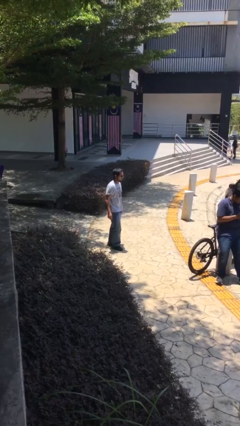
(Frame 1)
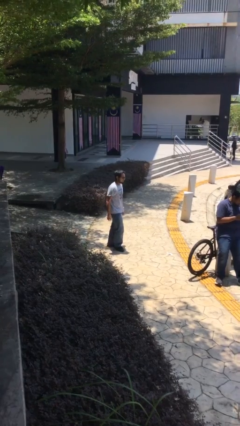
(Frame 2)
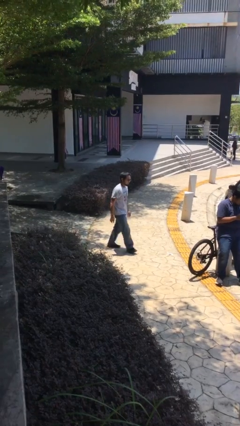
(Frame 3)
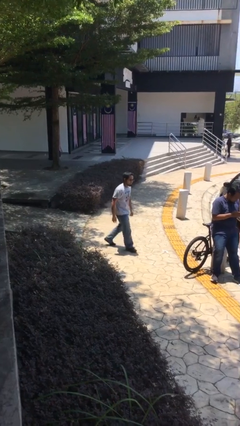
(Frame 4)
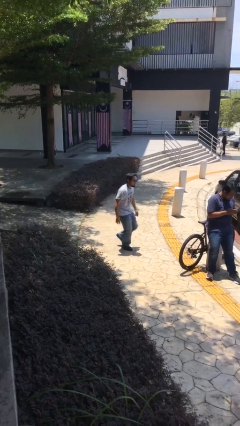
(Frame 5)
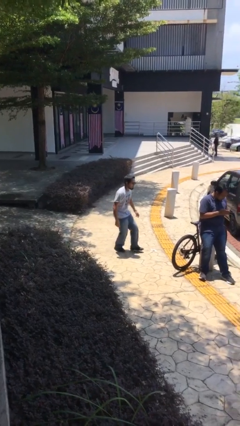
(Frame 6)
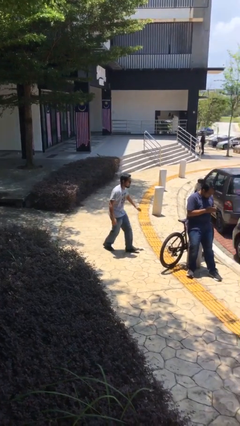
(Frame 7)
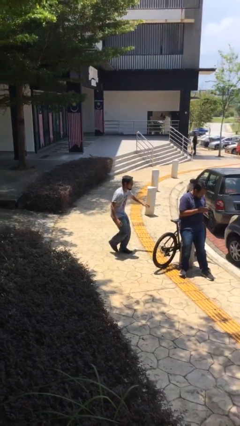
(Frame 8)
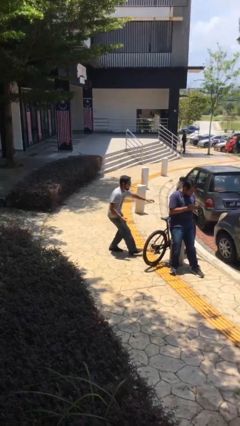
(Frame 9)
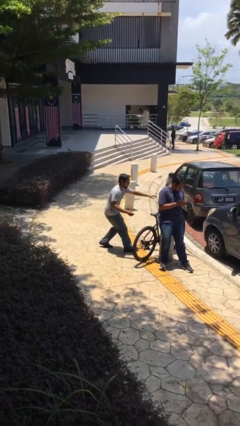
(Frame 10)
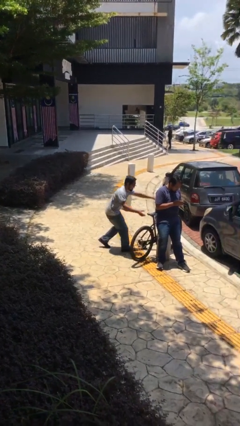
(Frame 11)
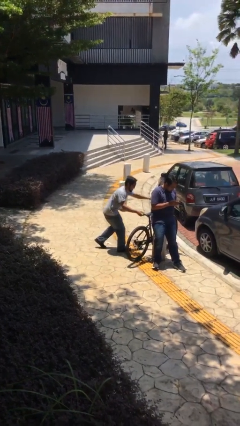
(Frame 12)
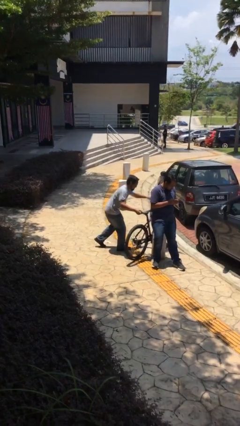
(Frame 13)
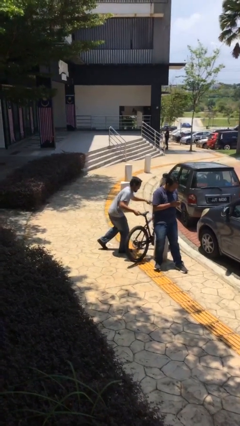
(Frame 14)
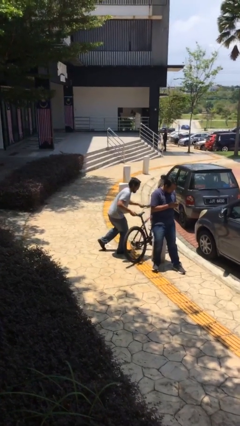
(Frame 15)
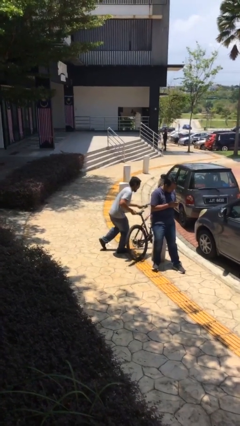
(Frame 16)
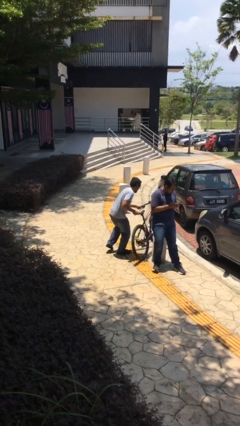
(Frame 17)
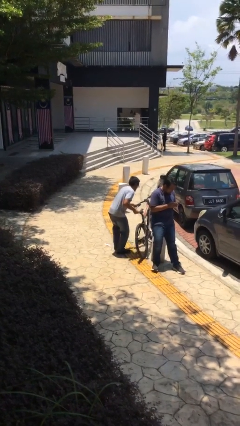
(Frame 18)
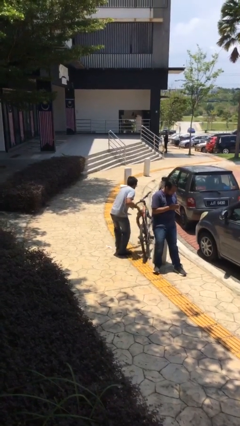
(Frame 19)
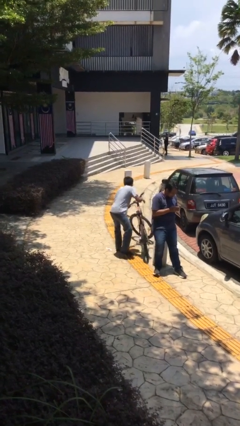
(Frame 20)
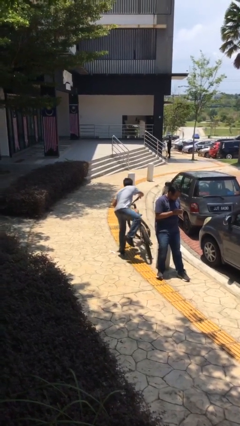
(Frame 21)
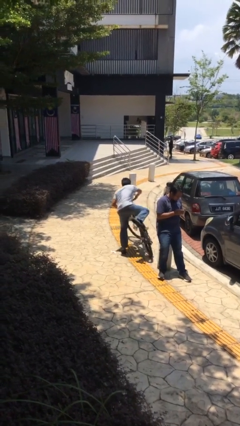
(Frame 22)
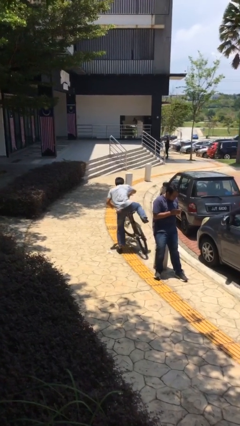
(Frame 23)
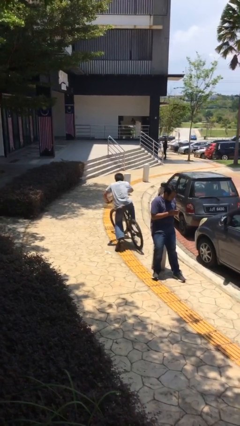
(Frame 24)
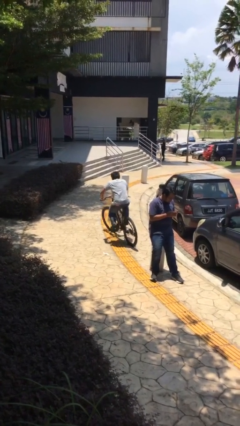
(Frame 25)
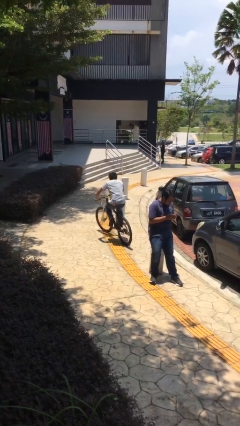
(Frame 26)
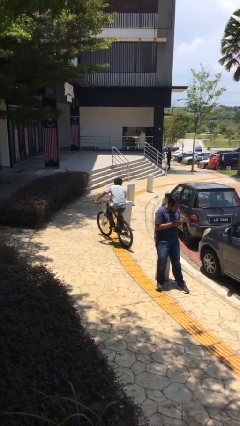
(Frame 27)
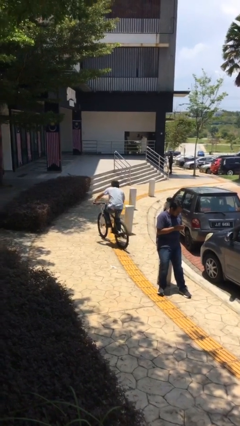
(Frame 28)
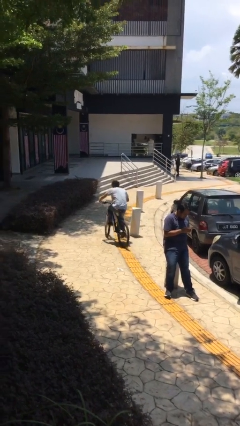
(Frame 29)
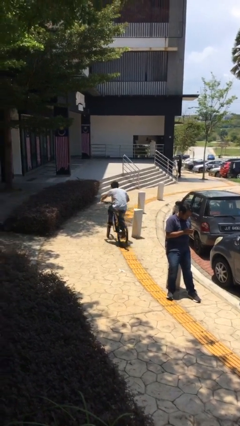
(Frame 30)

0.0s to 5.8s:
person steals object from person

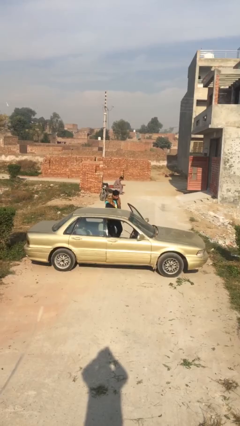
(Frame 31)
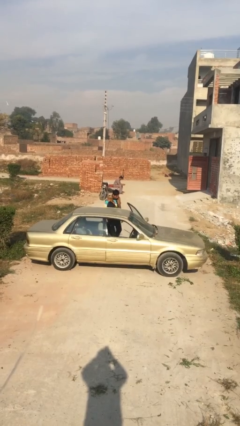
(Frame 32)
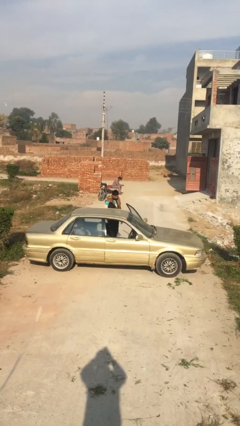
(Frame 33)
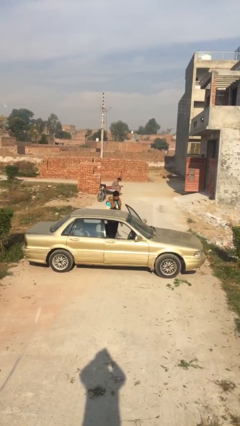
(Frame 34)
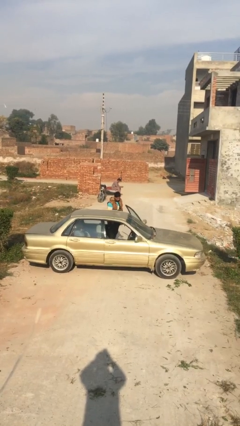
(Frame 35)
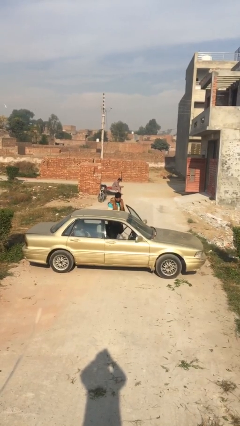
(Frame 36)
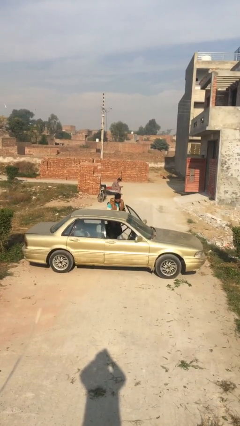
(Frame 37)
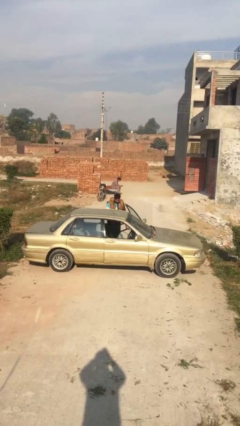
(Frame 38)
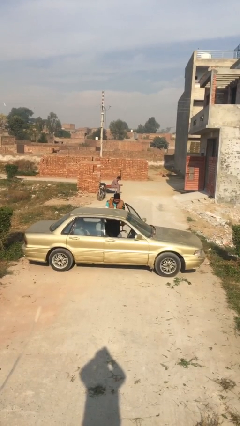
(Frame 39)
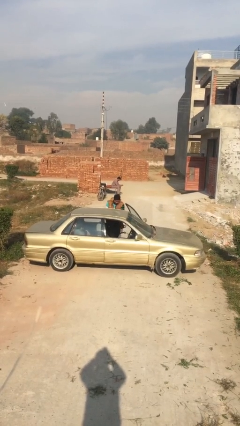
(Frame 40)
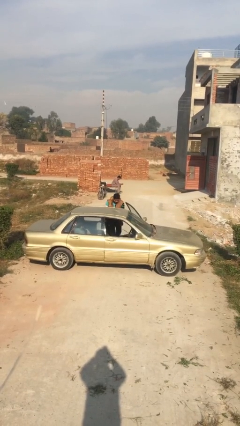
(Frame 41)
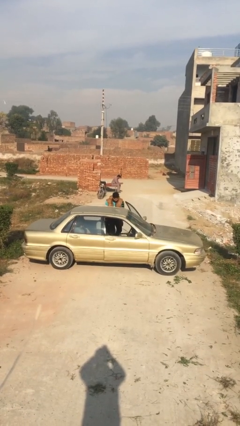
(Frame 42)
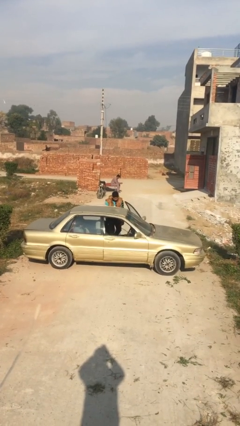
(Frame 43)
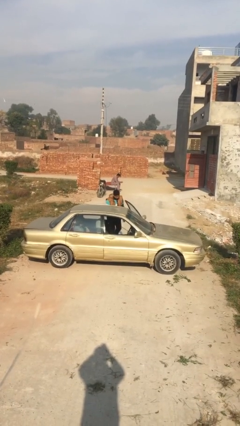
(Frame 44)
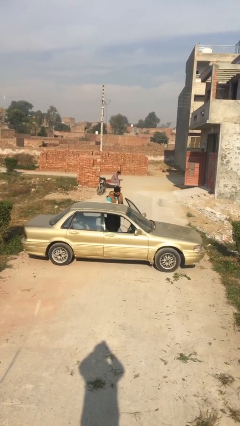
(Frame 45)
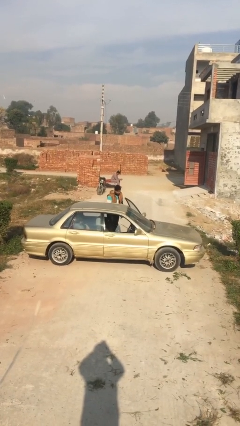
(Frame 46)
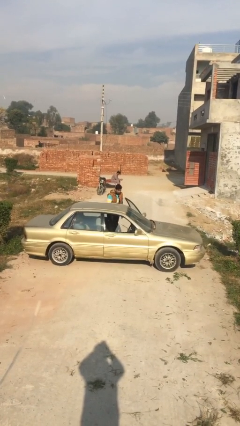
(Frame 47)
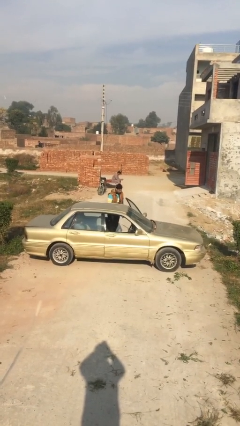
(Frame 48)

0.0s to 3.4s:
person loads car

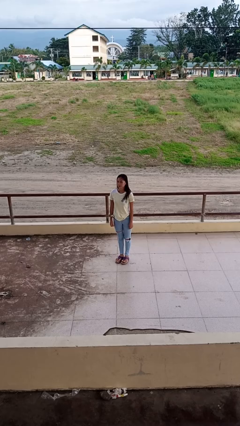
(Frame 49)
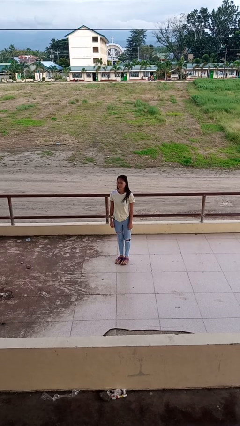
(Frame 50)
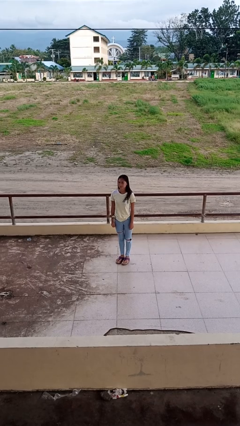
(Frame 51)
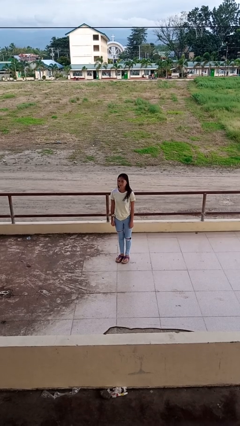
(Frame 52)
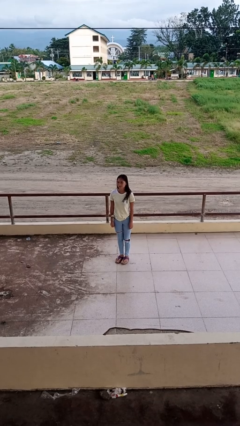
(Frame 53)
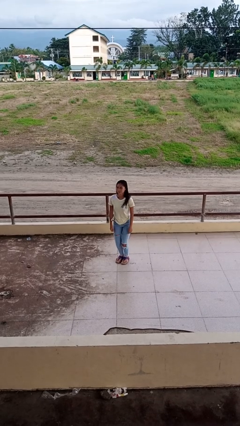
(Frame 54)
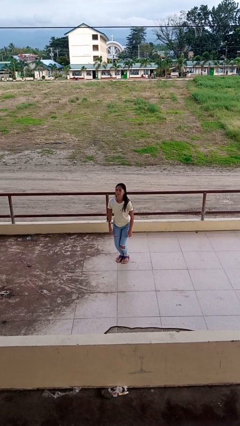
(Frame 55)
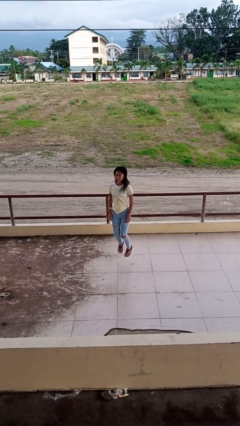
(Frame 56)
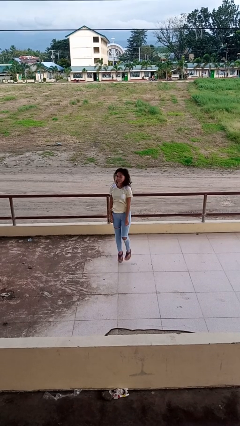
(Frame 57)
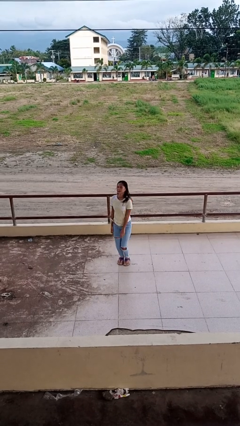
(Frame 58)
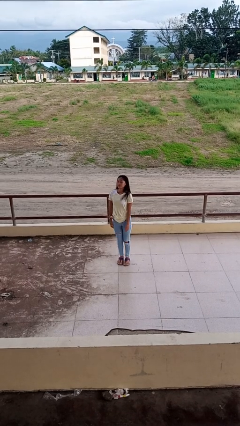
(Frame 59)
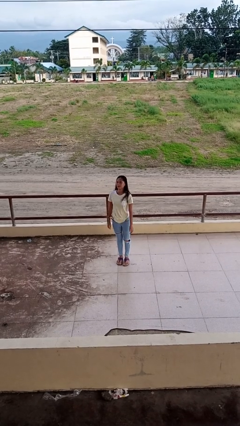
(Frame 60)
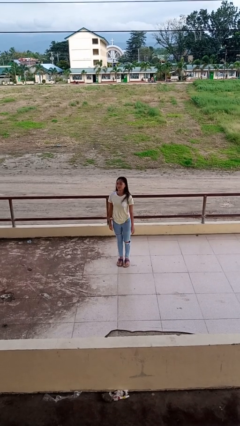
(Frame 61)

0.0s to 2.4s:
person jumps

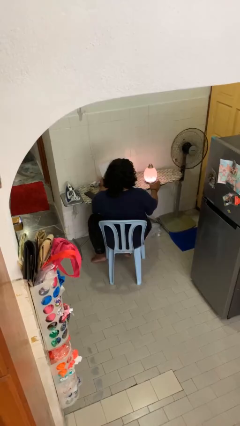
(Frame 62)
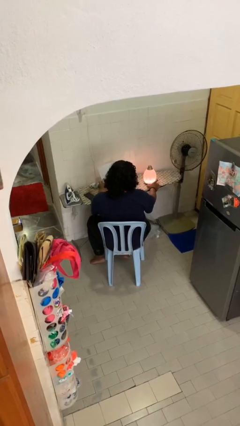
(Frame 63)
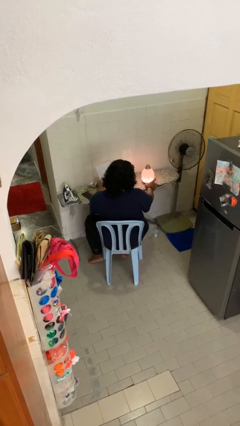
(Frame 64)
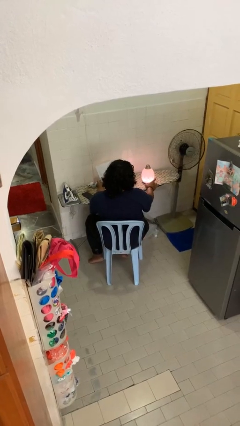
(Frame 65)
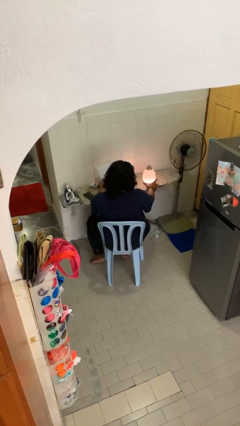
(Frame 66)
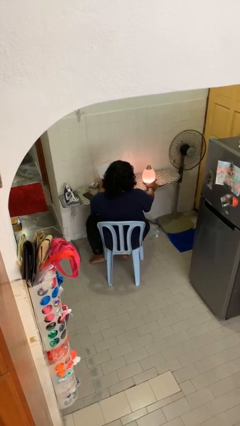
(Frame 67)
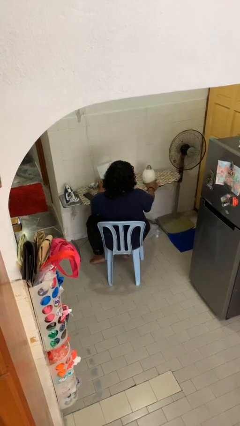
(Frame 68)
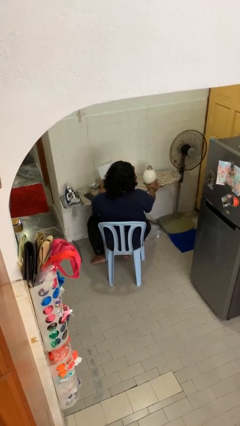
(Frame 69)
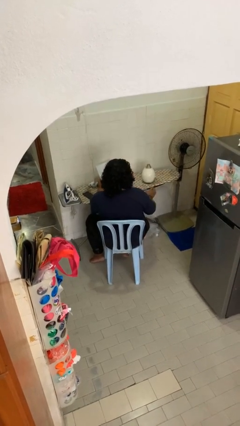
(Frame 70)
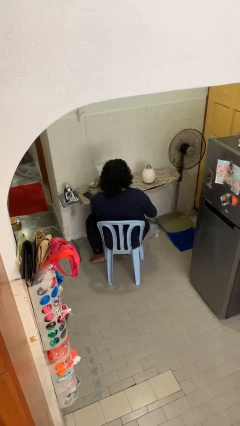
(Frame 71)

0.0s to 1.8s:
person turns off lamp

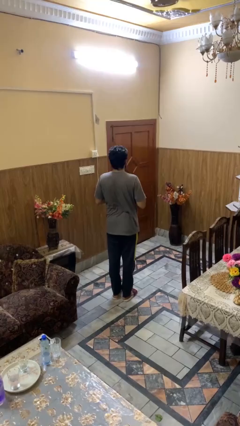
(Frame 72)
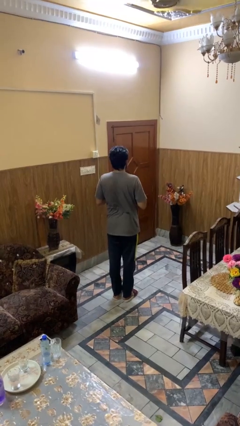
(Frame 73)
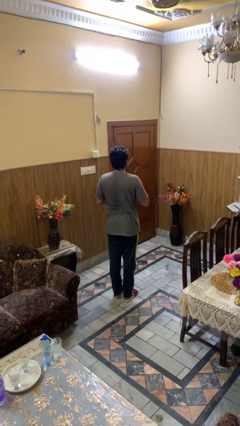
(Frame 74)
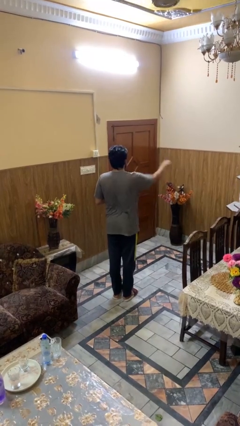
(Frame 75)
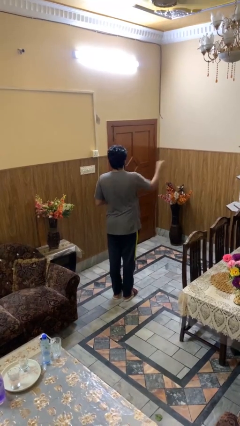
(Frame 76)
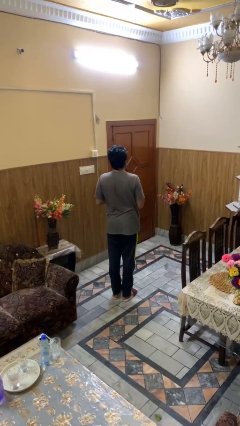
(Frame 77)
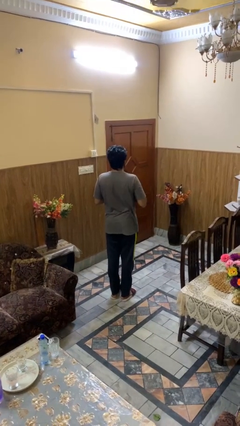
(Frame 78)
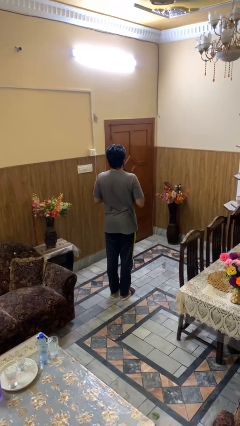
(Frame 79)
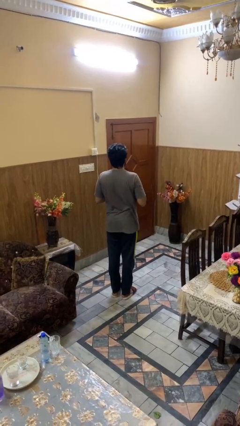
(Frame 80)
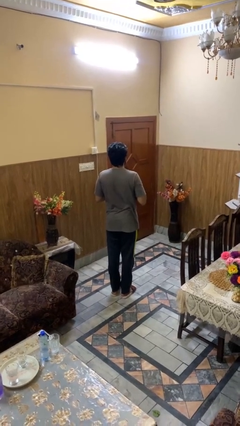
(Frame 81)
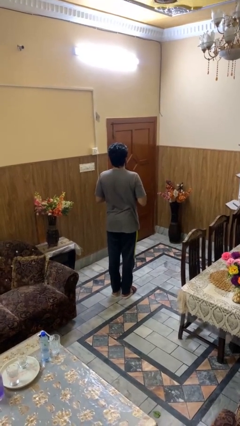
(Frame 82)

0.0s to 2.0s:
person punches

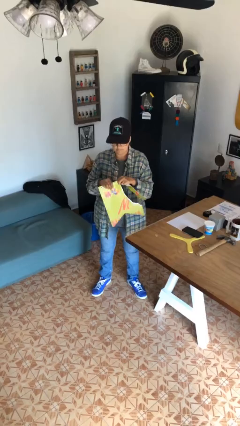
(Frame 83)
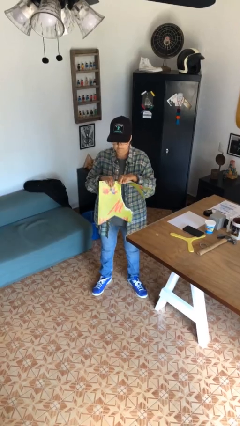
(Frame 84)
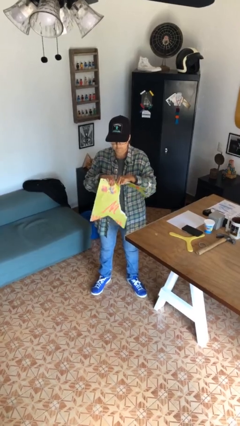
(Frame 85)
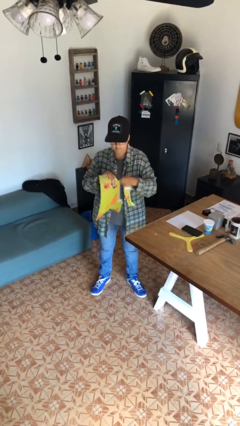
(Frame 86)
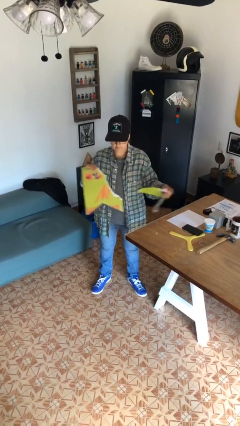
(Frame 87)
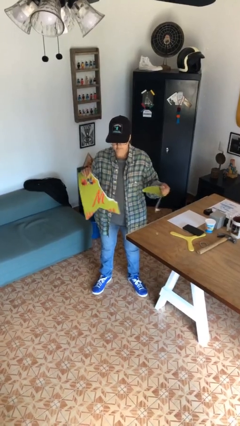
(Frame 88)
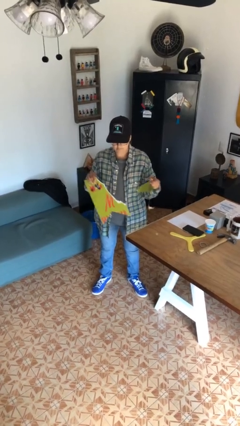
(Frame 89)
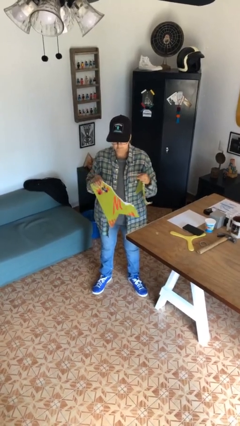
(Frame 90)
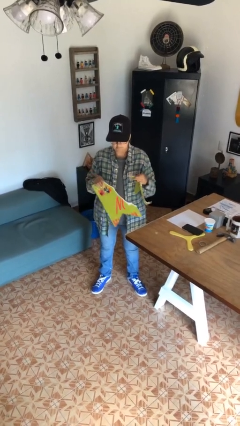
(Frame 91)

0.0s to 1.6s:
person tears paper

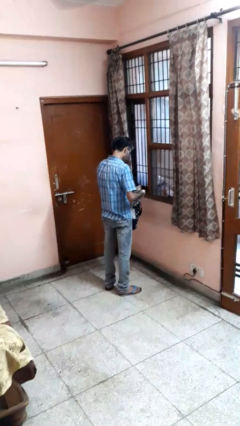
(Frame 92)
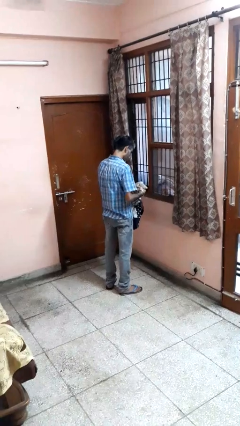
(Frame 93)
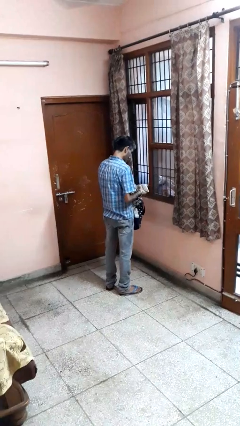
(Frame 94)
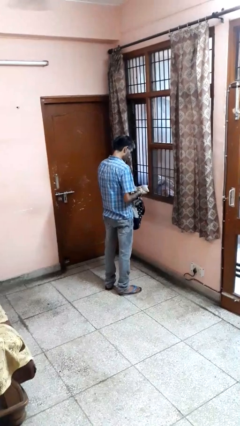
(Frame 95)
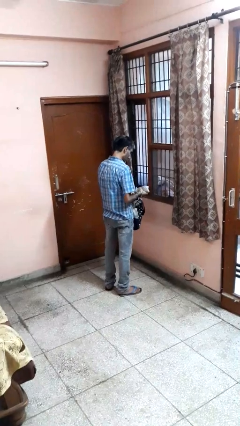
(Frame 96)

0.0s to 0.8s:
person takes object from bag
